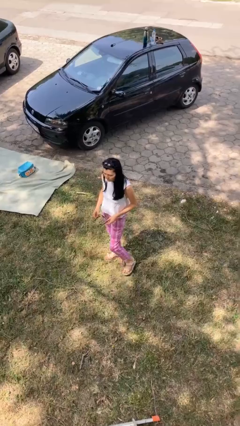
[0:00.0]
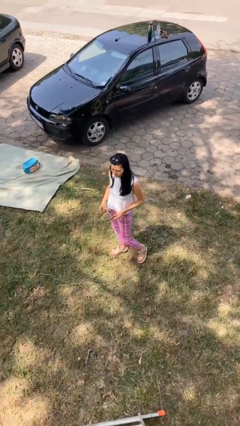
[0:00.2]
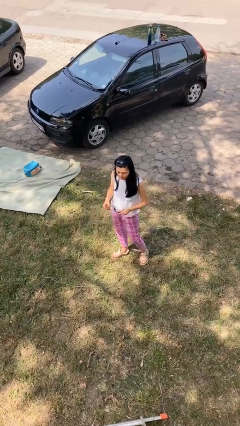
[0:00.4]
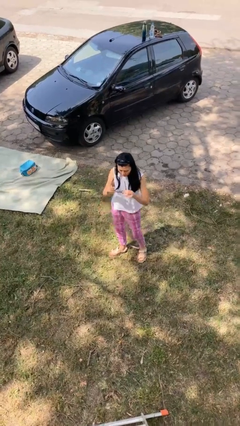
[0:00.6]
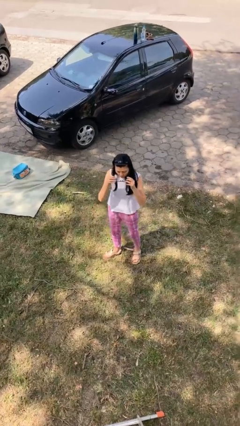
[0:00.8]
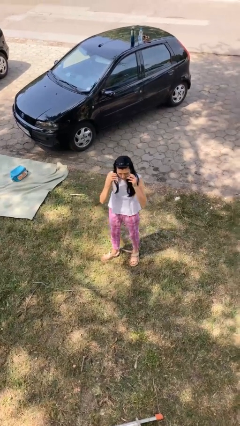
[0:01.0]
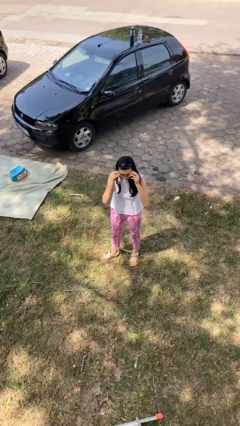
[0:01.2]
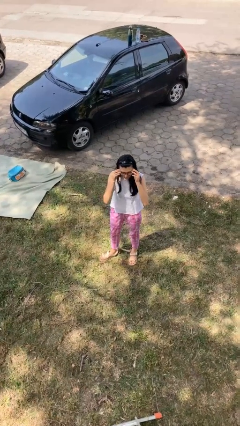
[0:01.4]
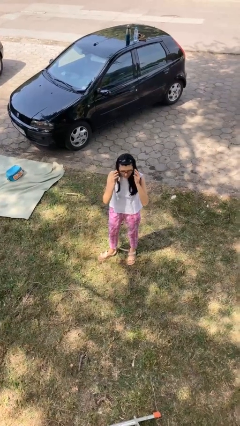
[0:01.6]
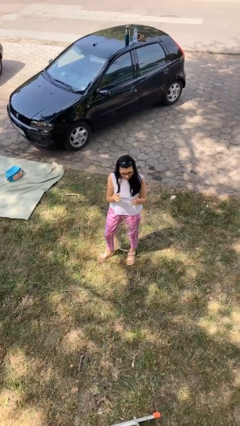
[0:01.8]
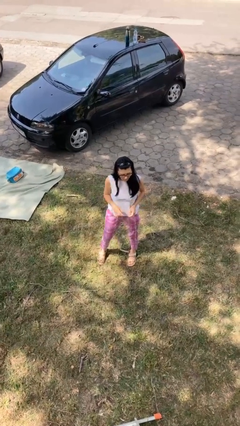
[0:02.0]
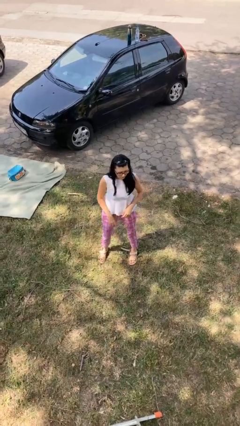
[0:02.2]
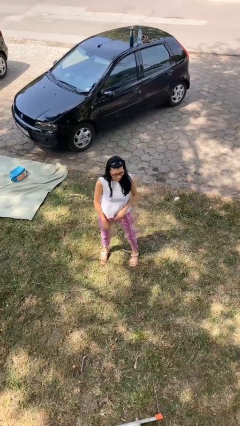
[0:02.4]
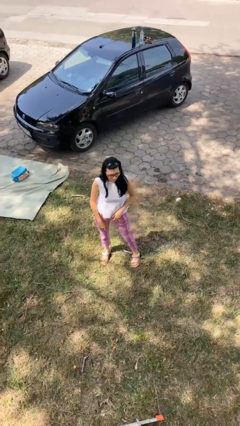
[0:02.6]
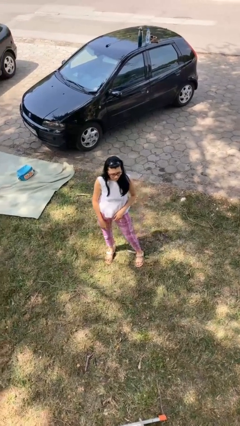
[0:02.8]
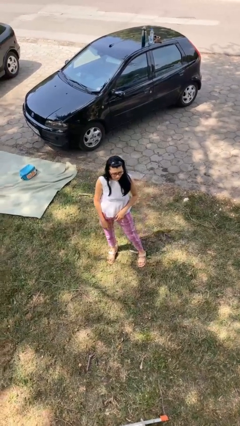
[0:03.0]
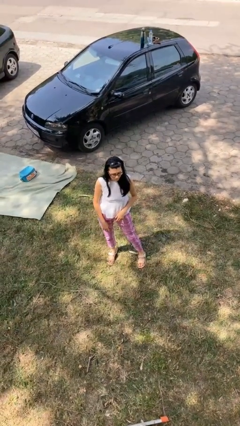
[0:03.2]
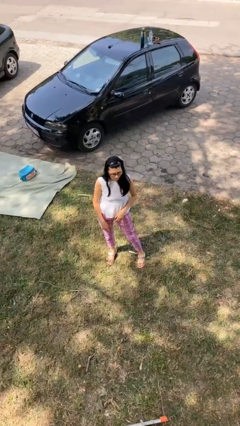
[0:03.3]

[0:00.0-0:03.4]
person puts on glasses

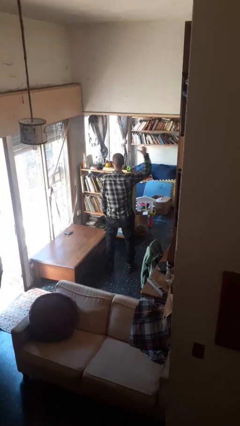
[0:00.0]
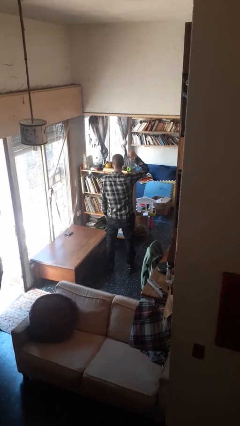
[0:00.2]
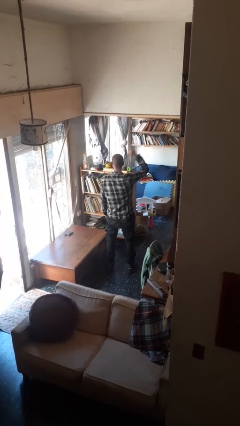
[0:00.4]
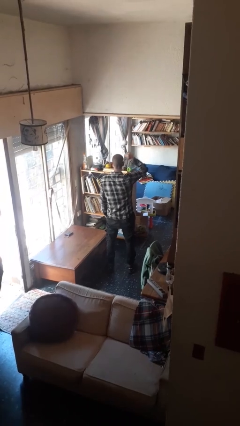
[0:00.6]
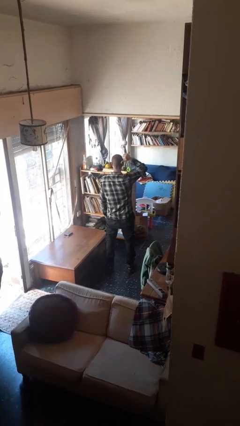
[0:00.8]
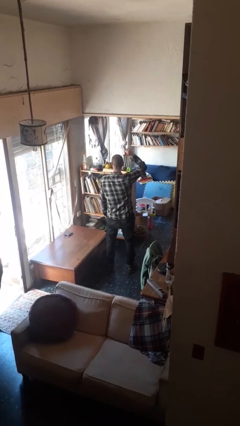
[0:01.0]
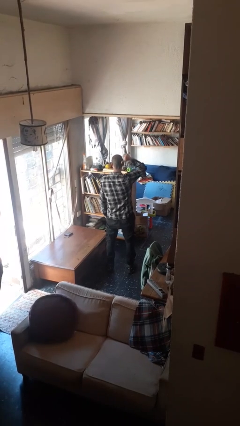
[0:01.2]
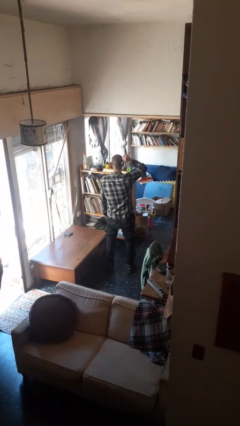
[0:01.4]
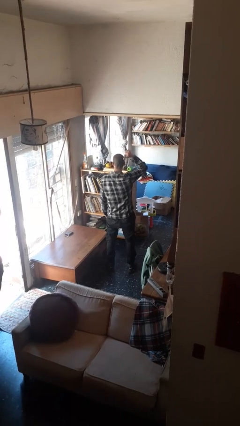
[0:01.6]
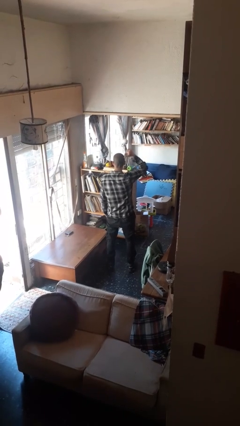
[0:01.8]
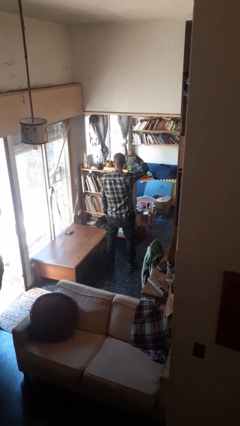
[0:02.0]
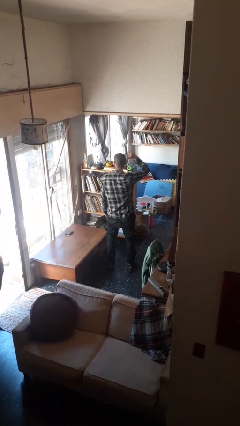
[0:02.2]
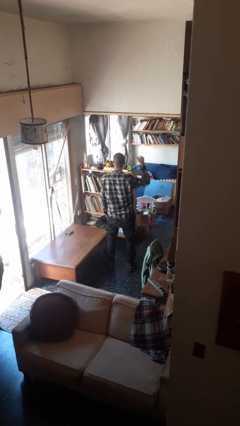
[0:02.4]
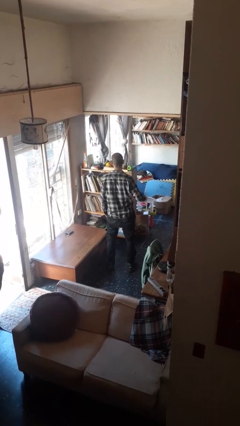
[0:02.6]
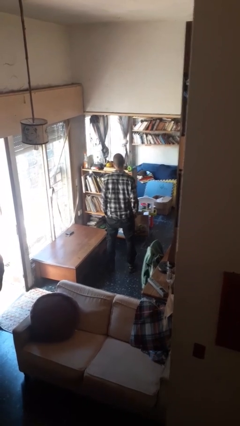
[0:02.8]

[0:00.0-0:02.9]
person gestures behind me

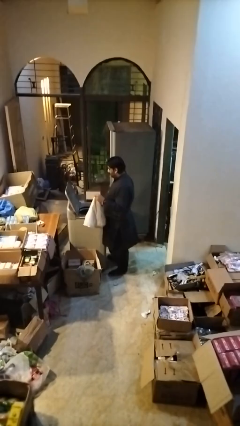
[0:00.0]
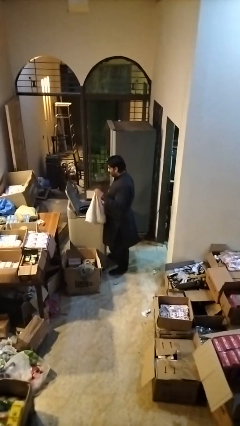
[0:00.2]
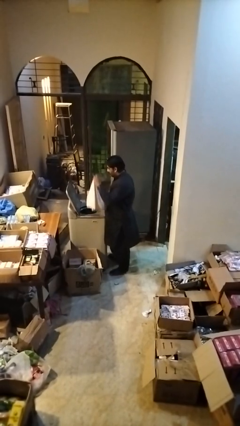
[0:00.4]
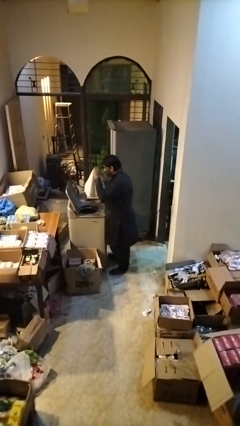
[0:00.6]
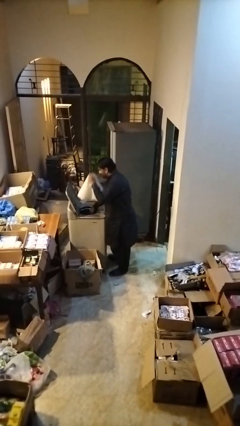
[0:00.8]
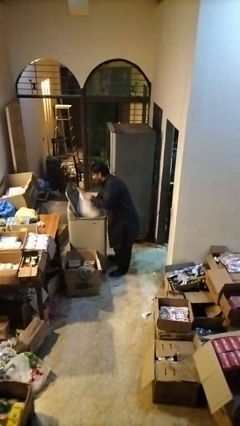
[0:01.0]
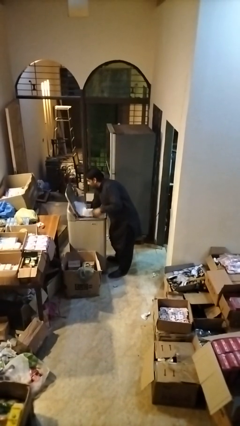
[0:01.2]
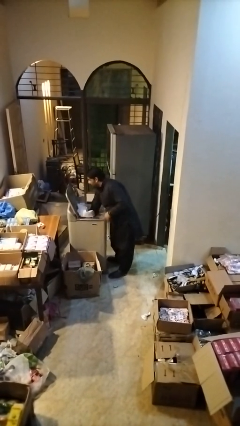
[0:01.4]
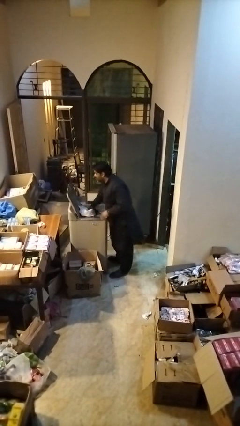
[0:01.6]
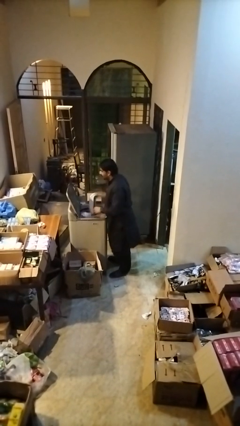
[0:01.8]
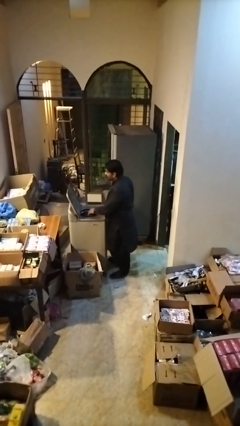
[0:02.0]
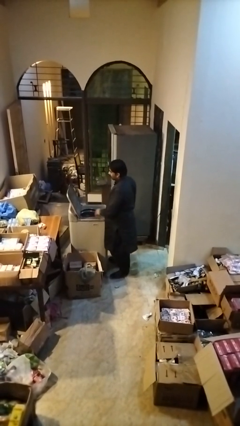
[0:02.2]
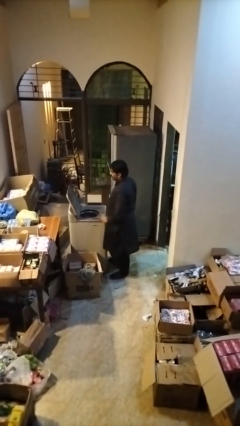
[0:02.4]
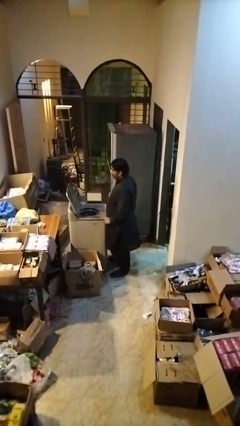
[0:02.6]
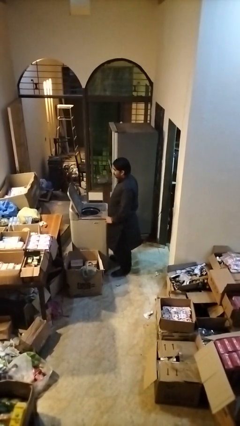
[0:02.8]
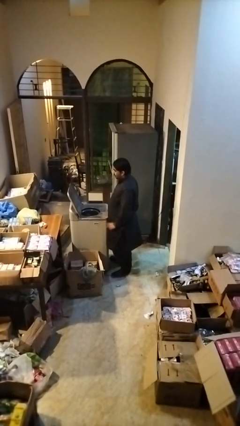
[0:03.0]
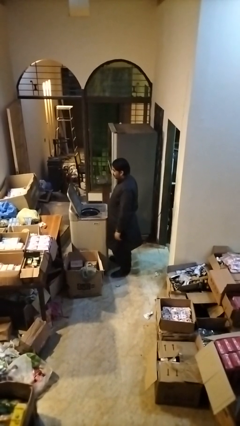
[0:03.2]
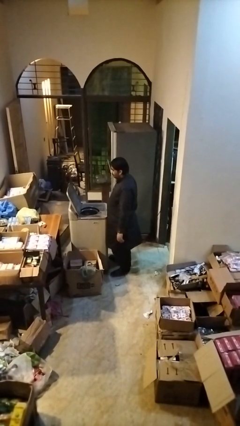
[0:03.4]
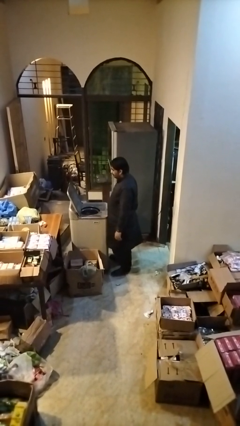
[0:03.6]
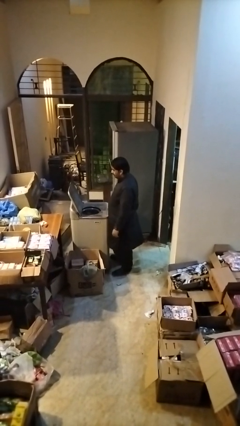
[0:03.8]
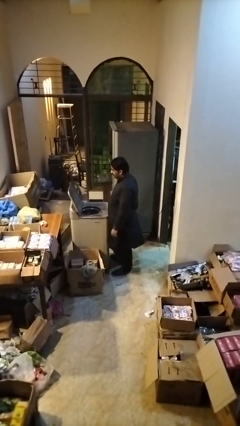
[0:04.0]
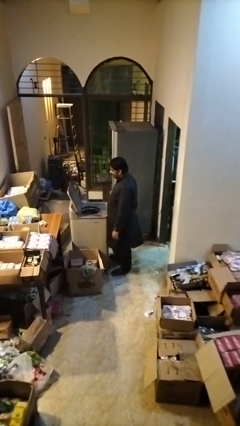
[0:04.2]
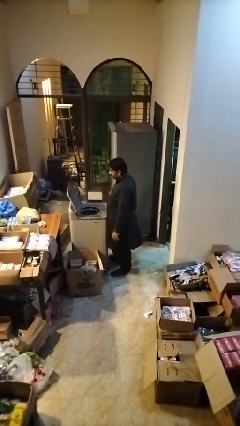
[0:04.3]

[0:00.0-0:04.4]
person loads clotheswasher

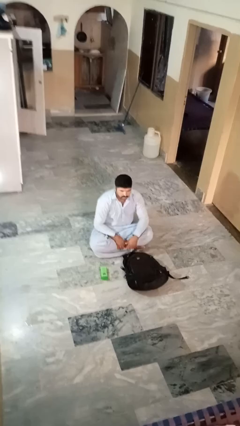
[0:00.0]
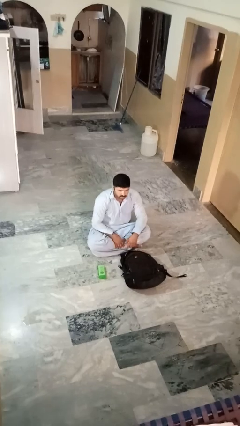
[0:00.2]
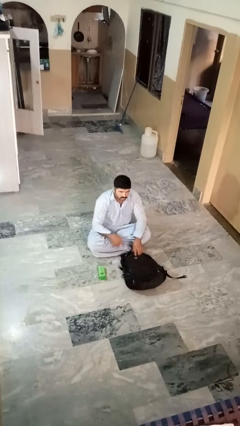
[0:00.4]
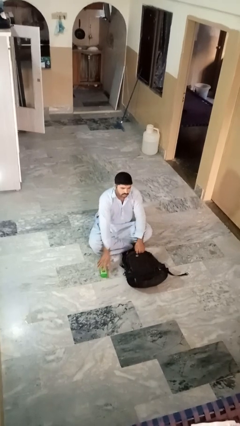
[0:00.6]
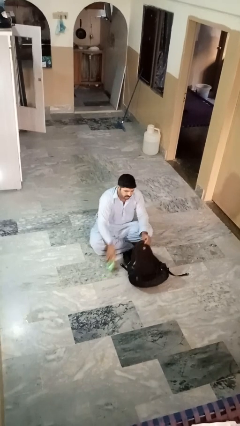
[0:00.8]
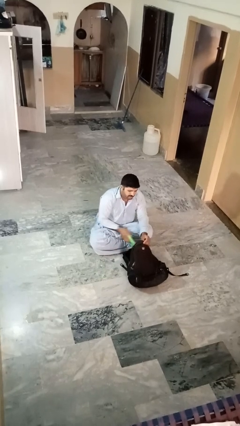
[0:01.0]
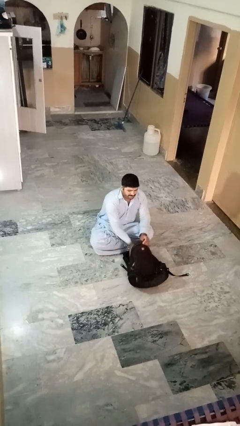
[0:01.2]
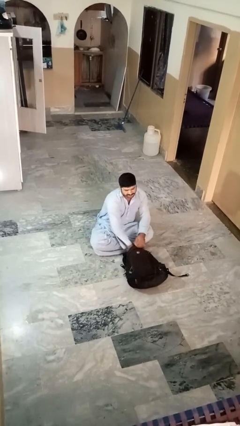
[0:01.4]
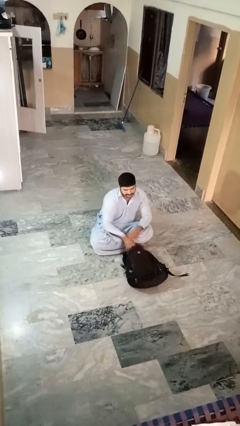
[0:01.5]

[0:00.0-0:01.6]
person puts object into bag

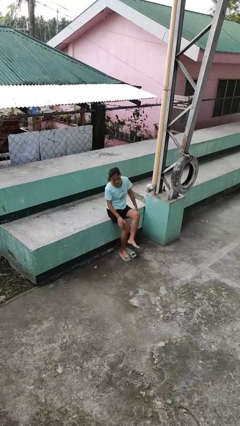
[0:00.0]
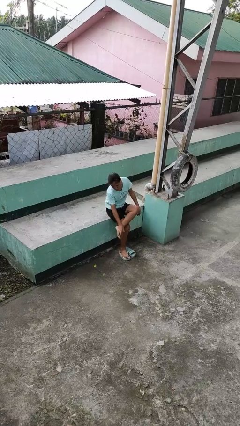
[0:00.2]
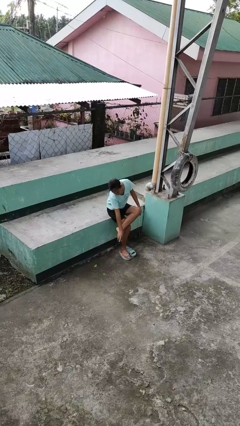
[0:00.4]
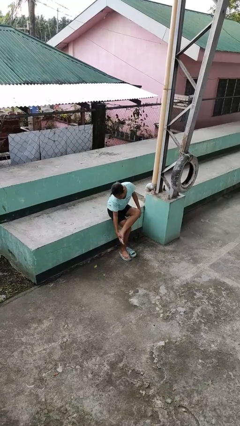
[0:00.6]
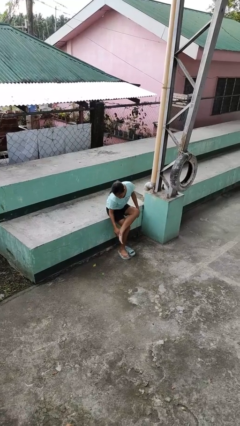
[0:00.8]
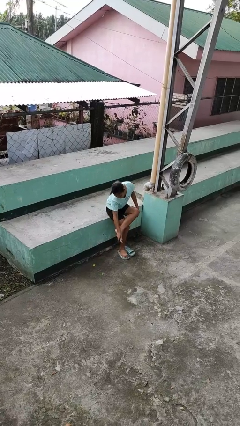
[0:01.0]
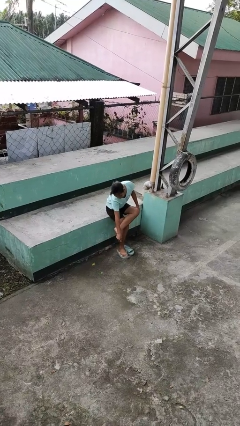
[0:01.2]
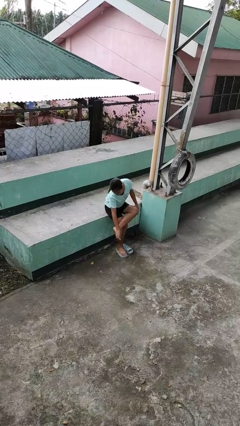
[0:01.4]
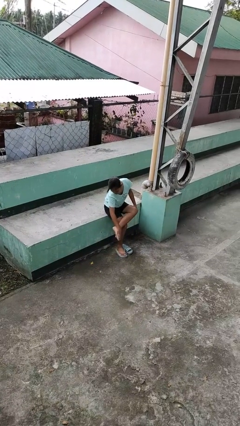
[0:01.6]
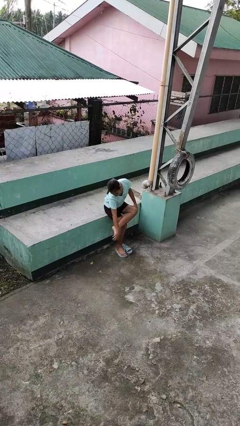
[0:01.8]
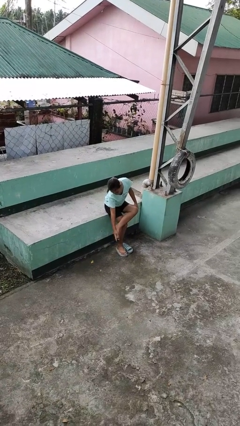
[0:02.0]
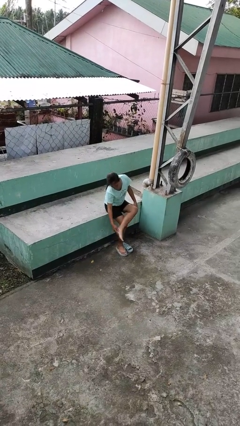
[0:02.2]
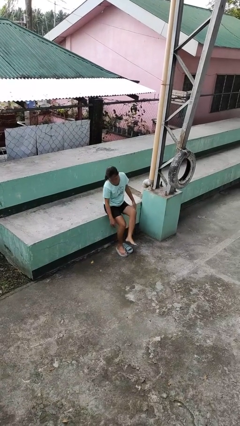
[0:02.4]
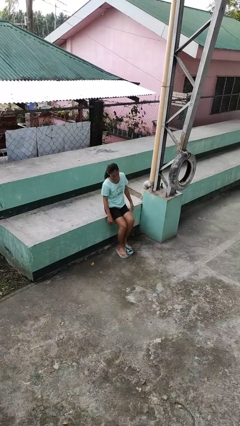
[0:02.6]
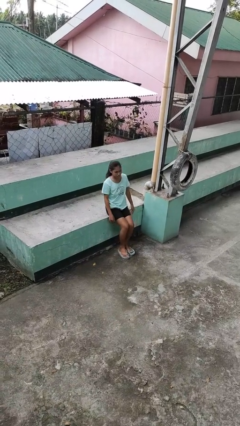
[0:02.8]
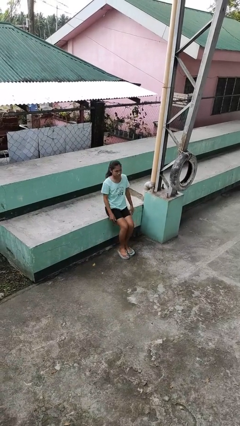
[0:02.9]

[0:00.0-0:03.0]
person rubs foot

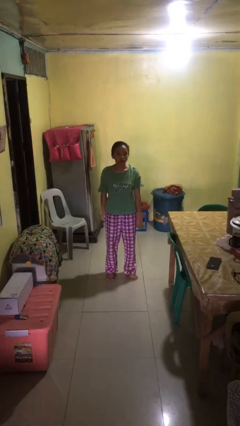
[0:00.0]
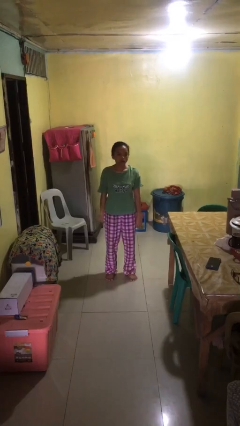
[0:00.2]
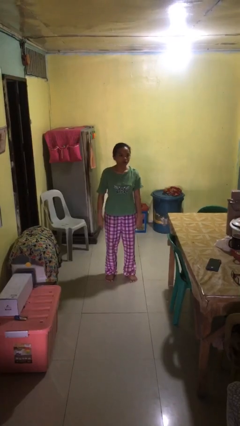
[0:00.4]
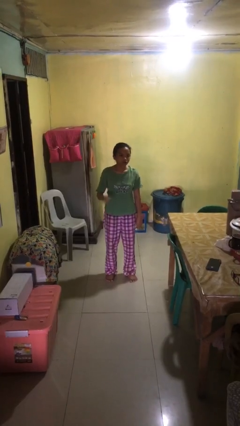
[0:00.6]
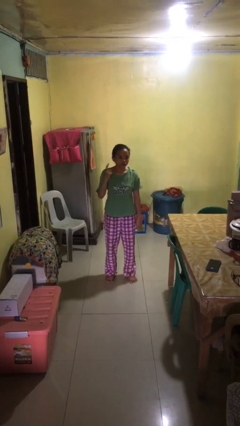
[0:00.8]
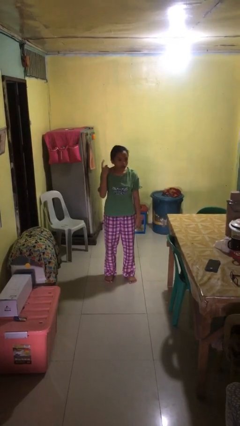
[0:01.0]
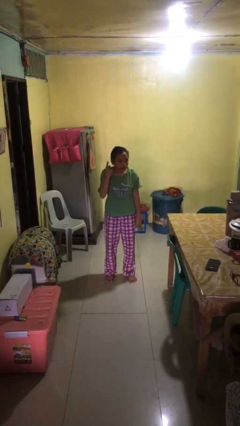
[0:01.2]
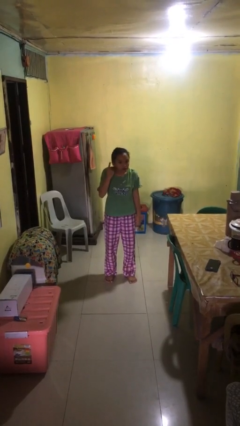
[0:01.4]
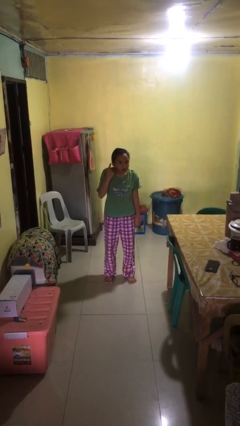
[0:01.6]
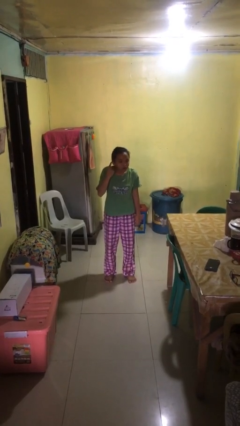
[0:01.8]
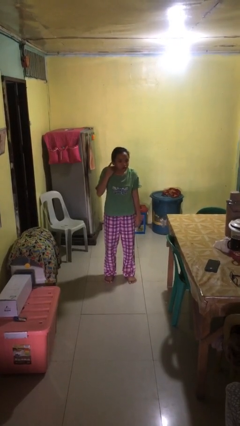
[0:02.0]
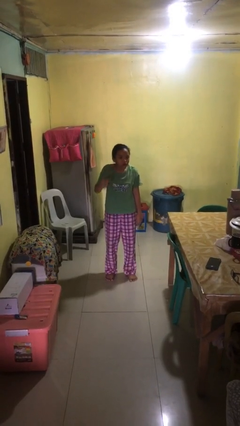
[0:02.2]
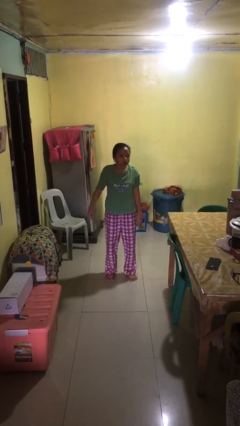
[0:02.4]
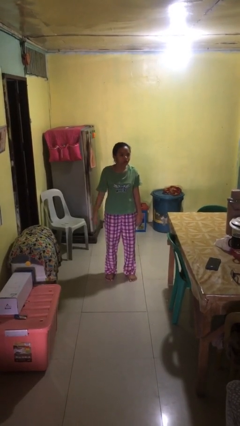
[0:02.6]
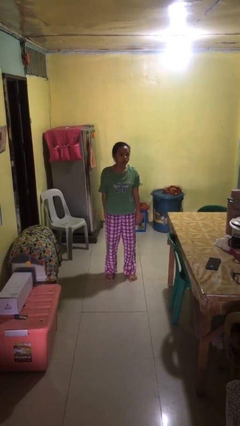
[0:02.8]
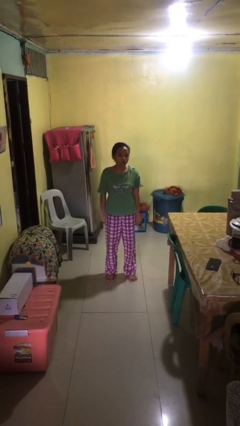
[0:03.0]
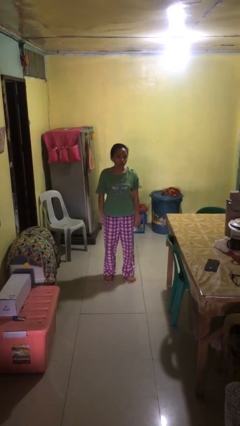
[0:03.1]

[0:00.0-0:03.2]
person gestures listen closely
